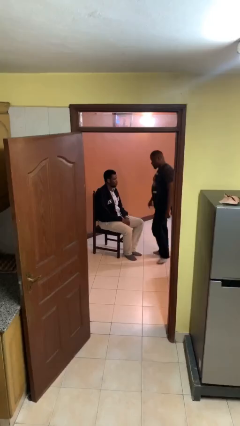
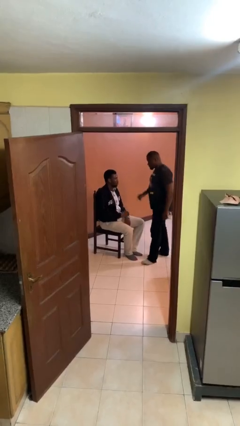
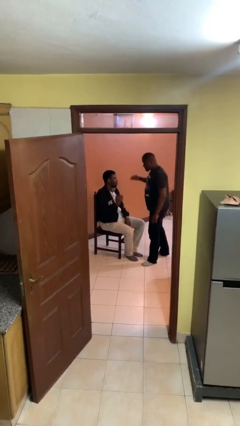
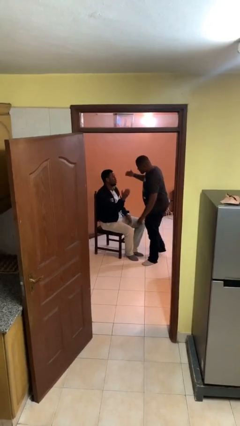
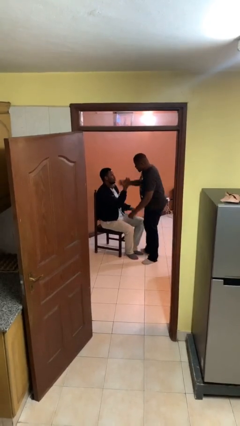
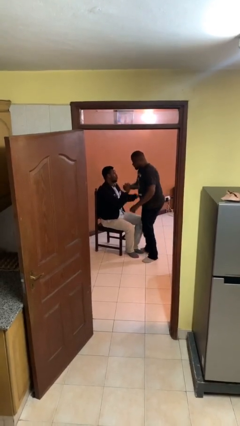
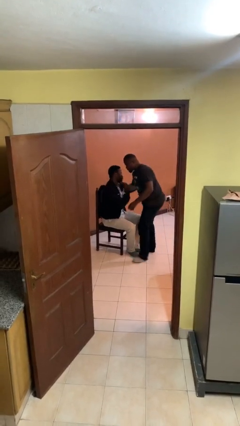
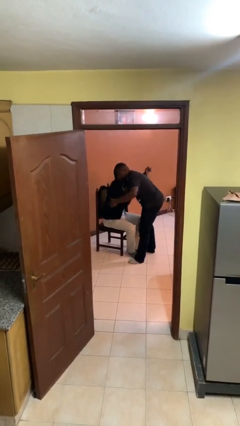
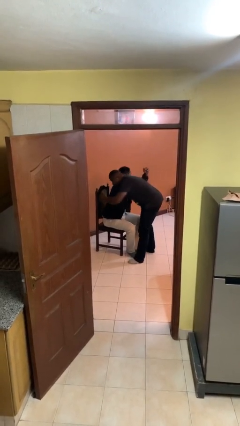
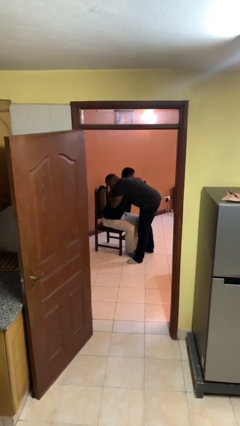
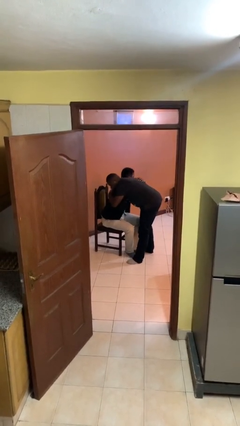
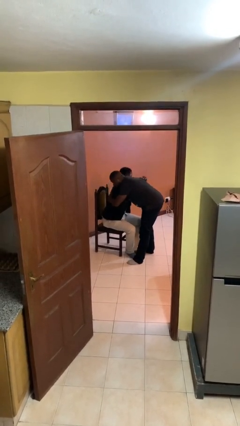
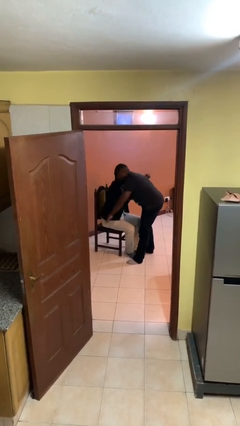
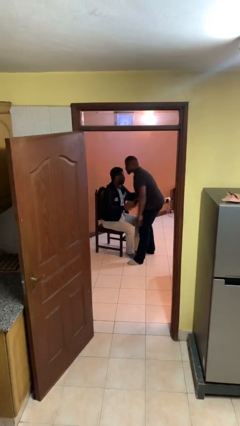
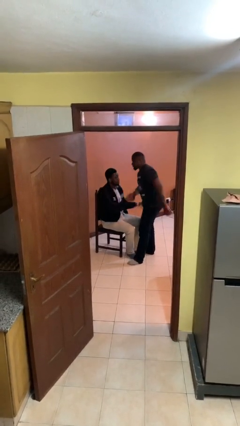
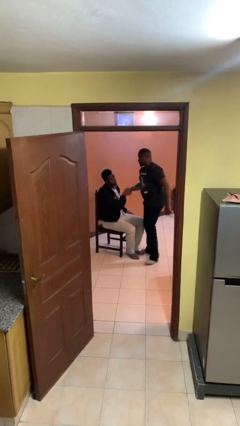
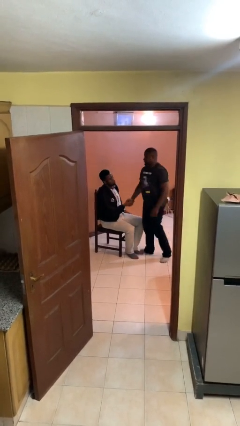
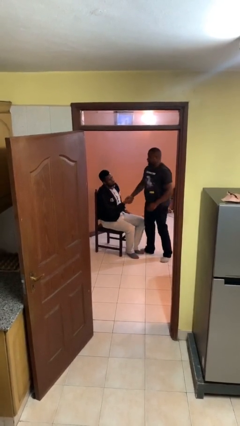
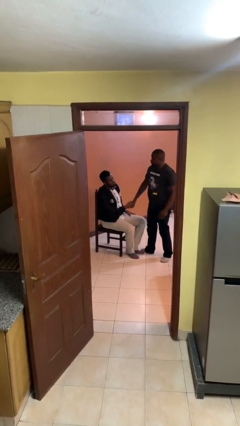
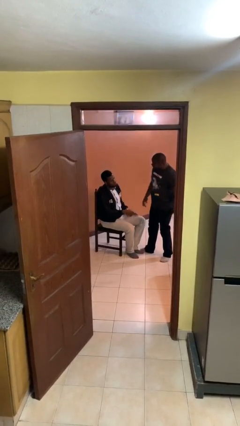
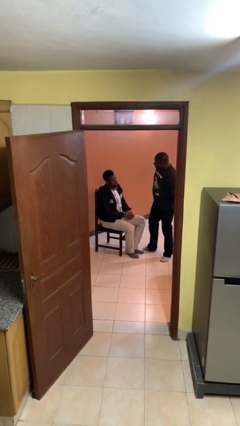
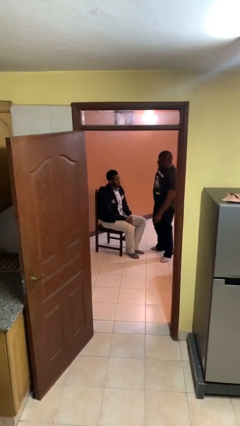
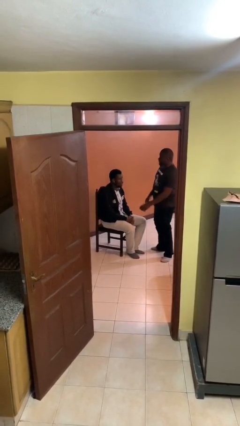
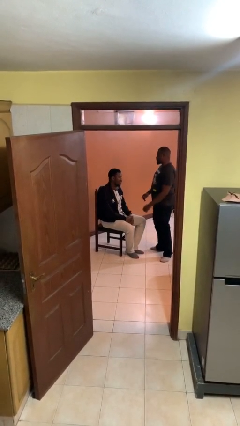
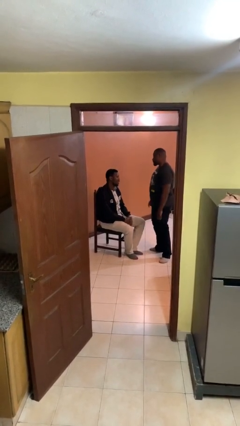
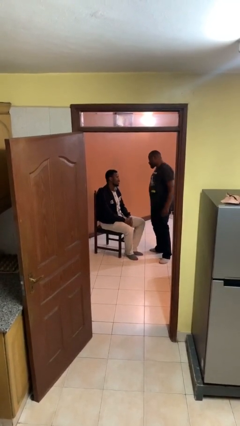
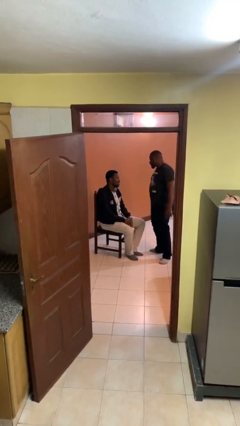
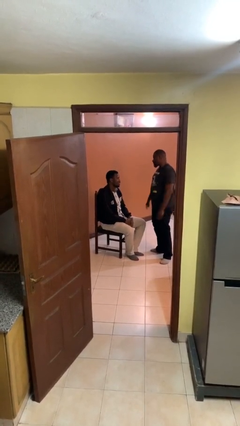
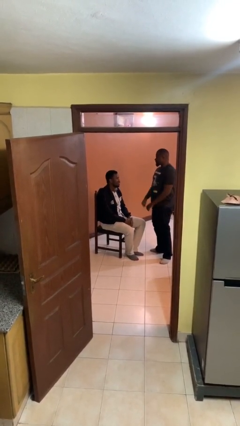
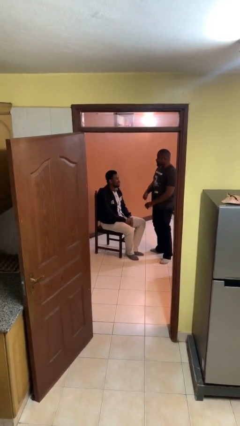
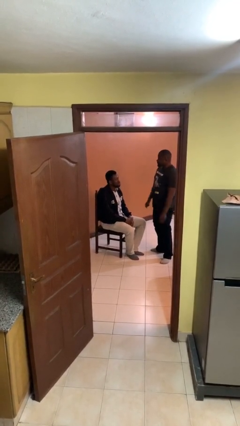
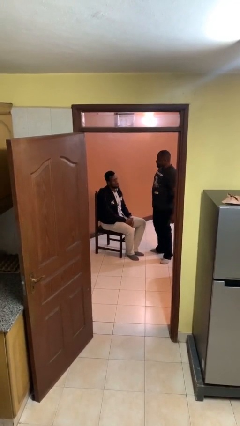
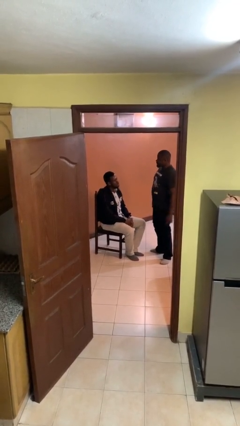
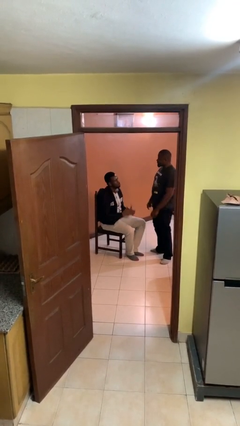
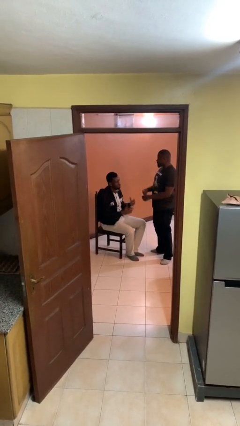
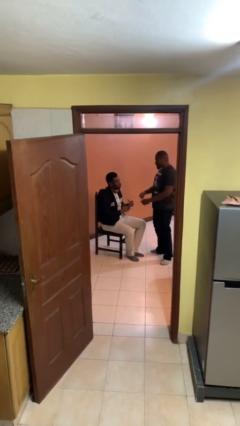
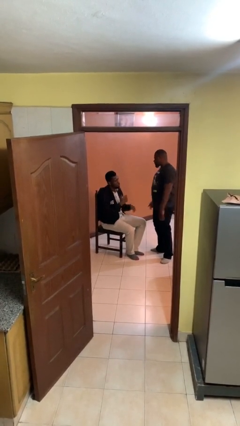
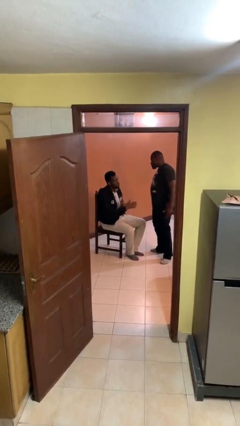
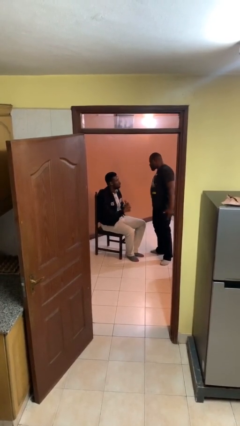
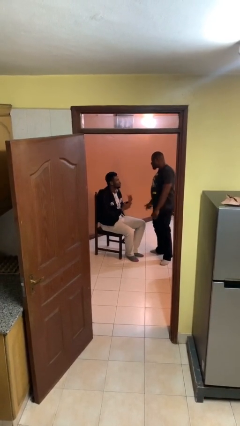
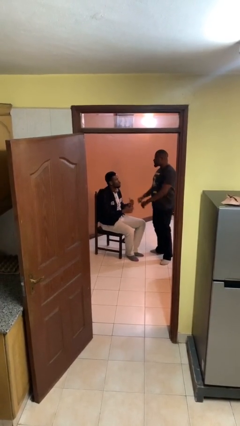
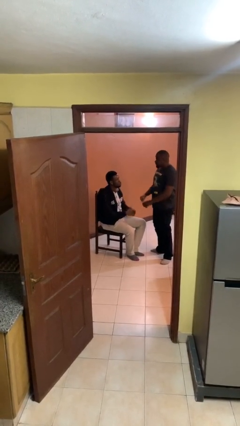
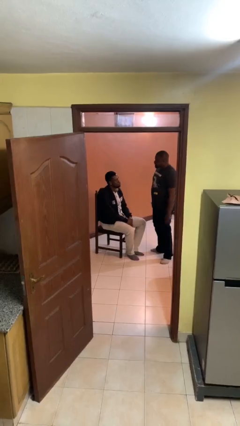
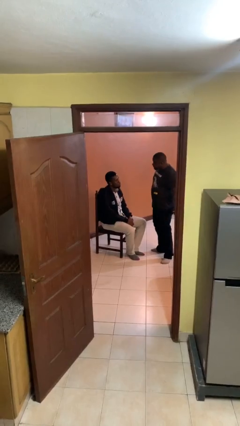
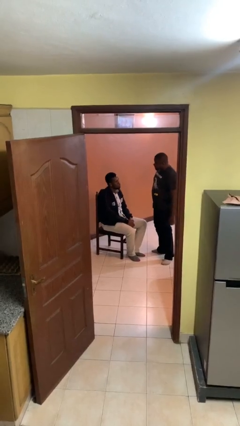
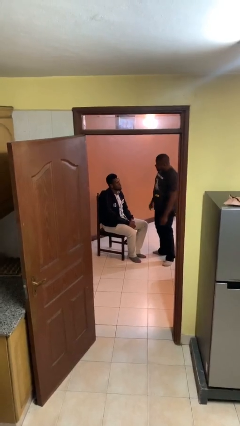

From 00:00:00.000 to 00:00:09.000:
person embraces person

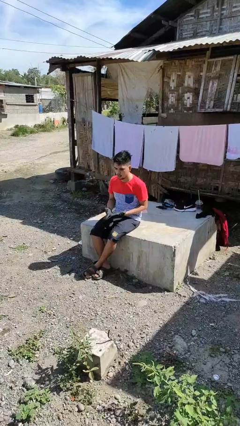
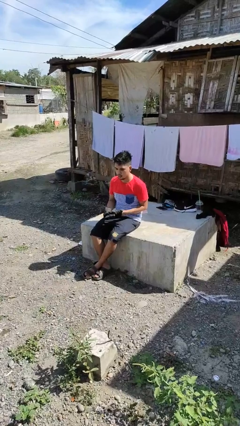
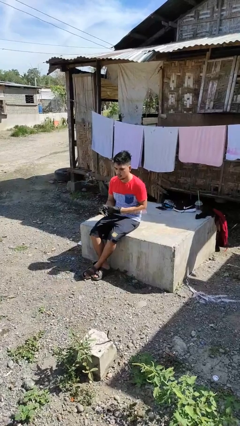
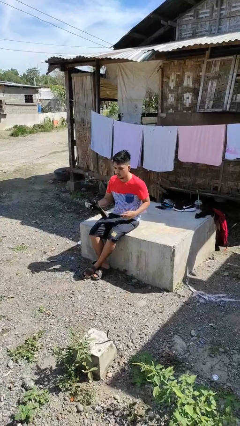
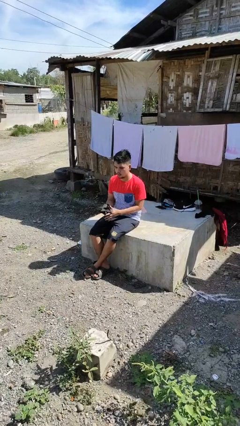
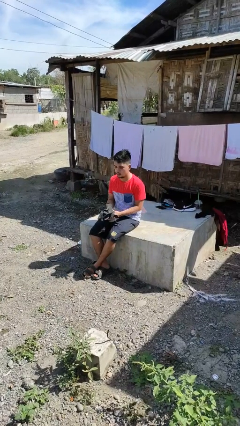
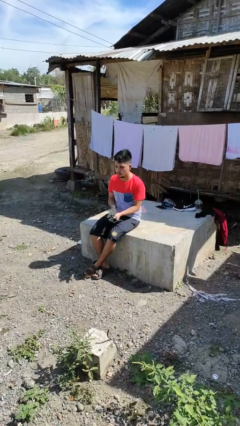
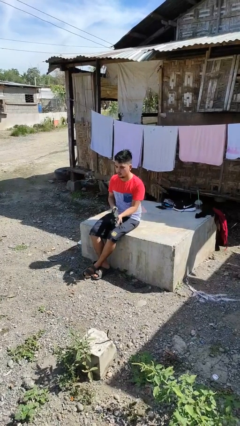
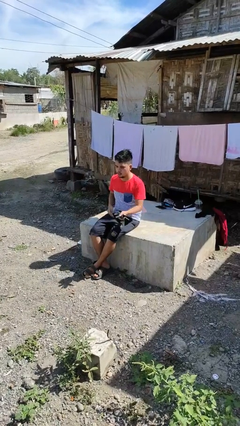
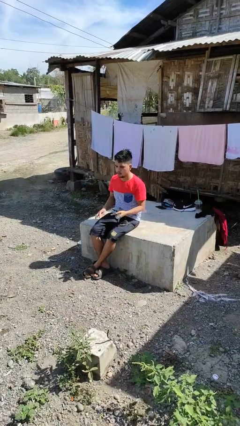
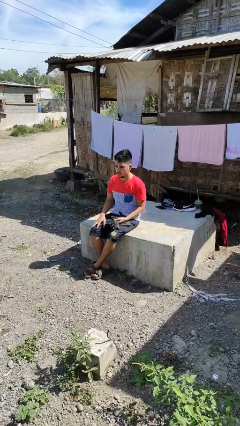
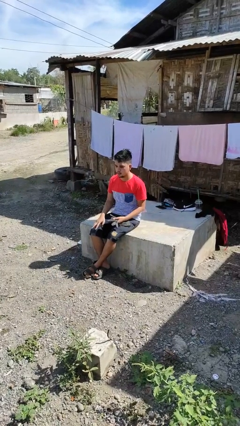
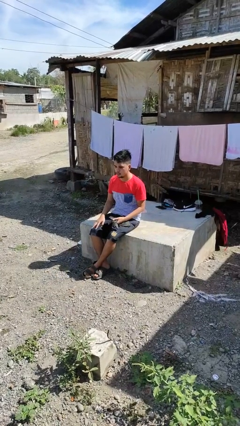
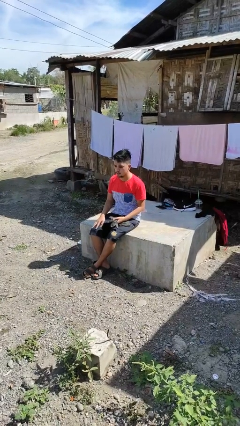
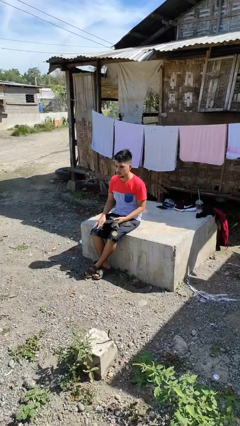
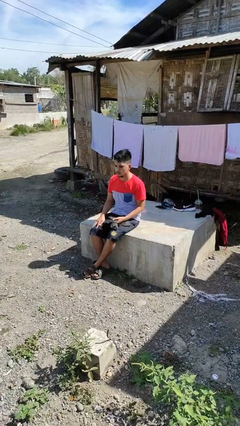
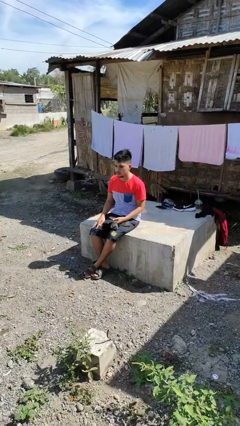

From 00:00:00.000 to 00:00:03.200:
person takes off gloves

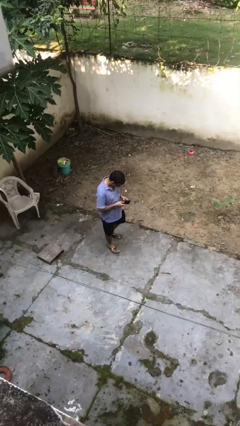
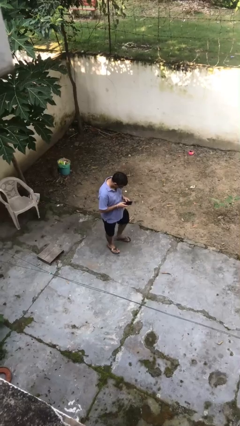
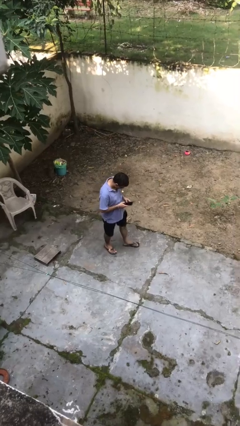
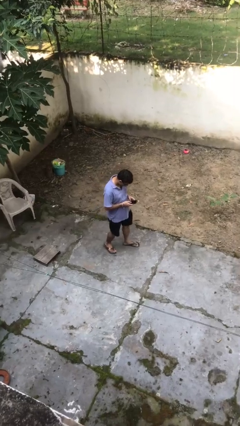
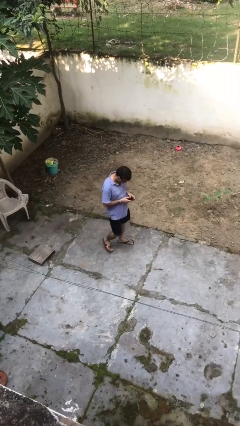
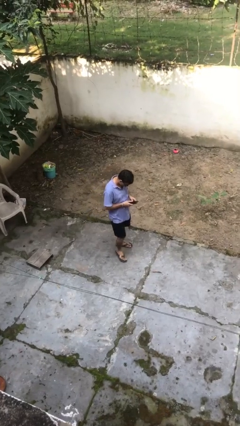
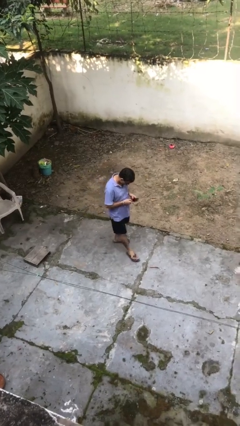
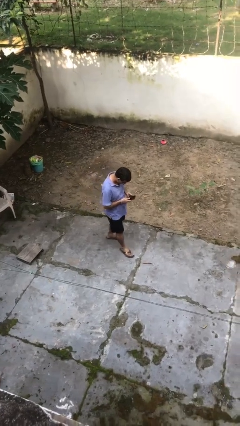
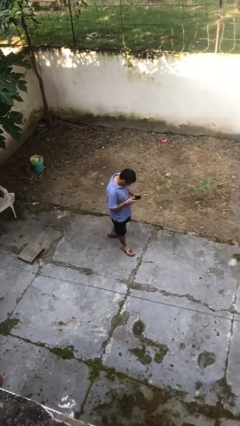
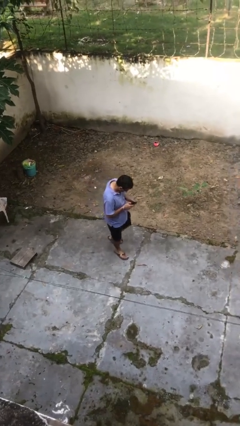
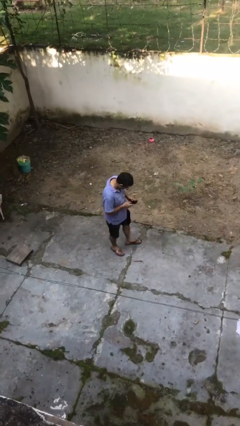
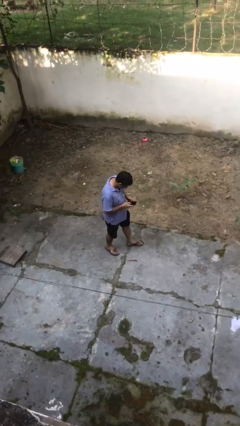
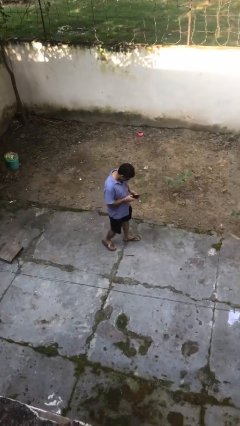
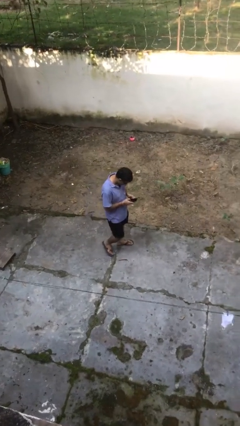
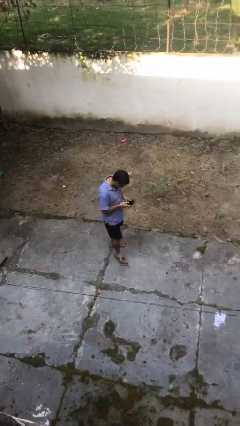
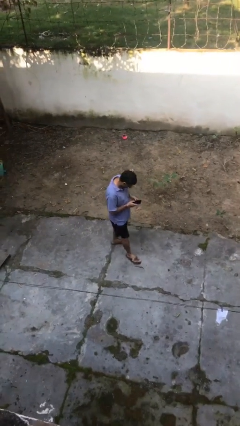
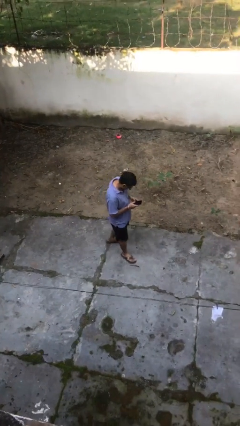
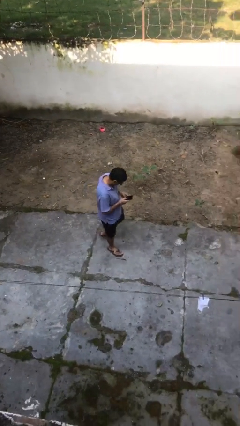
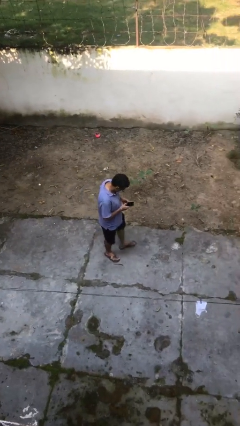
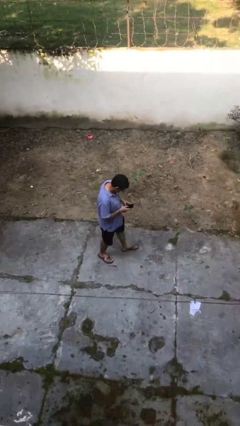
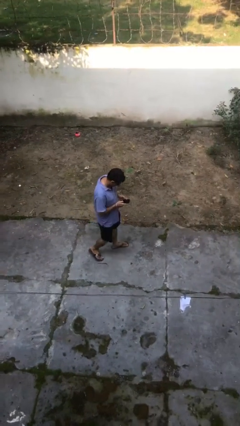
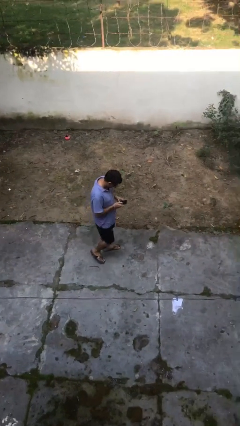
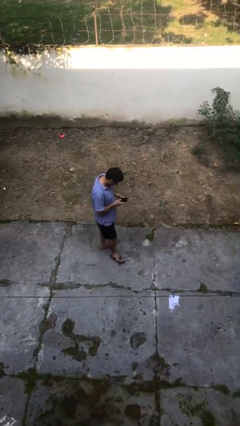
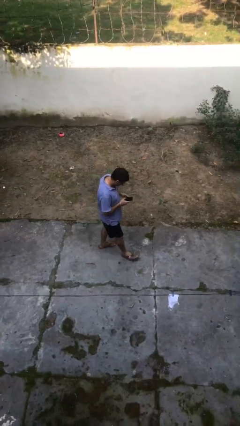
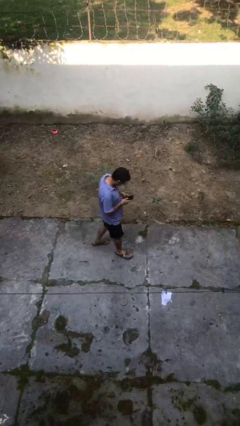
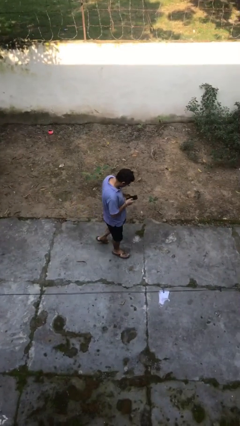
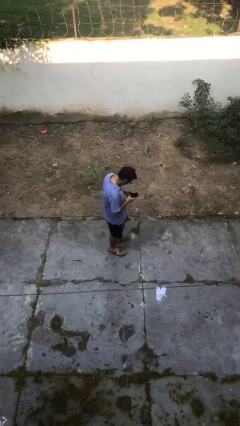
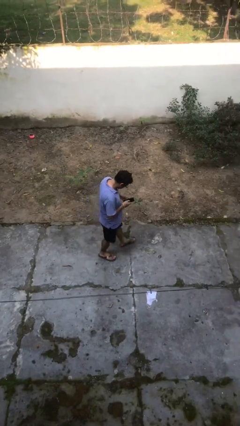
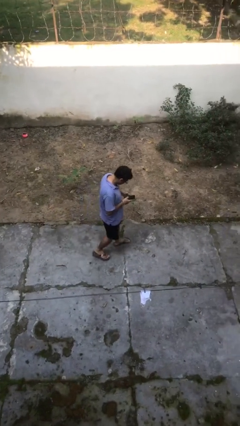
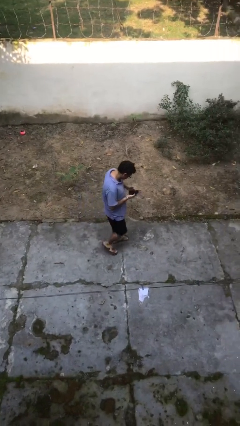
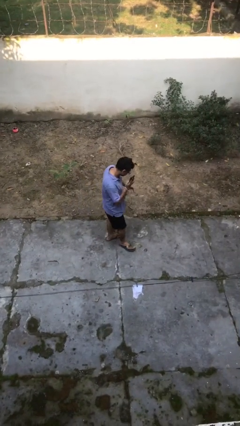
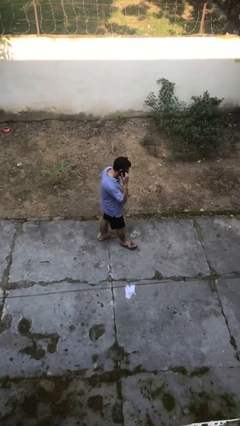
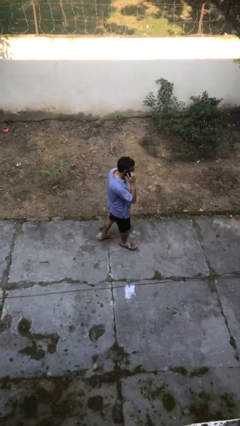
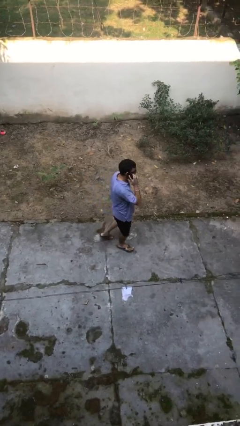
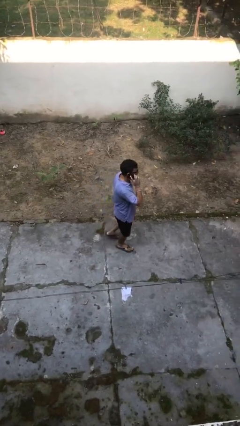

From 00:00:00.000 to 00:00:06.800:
person texts on phone
